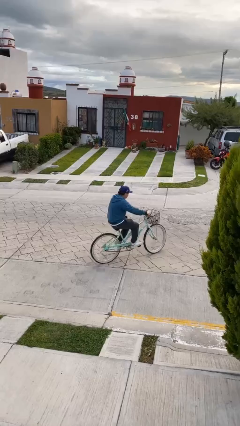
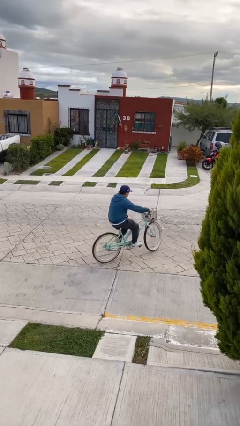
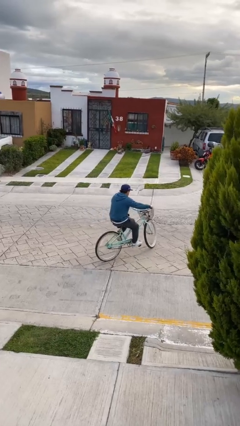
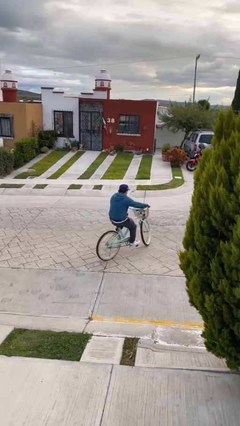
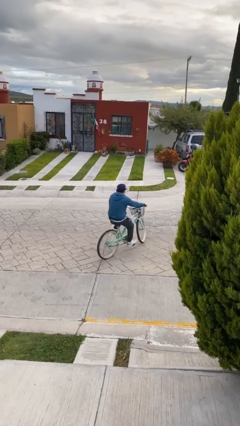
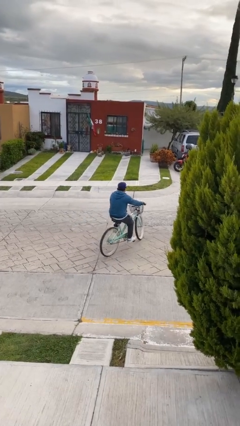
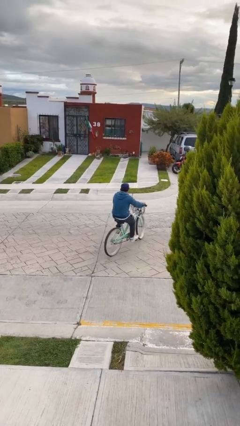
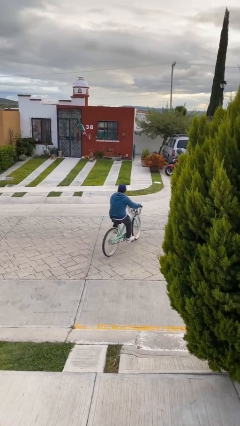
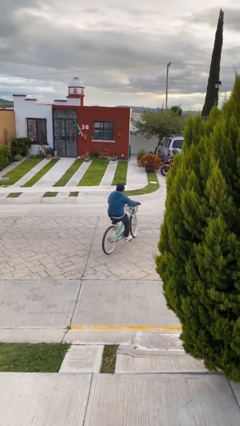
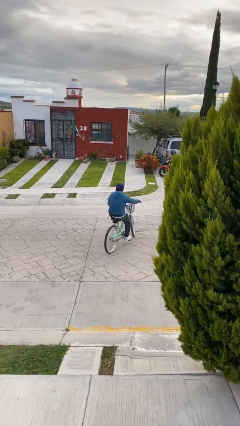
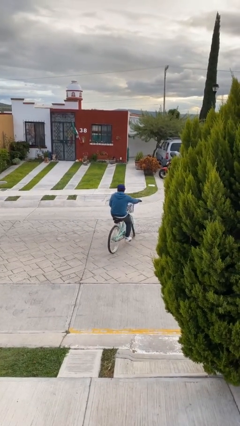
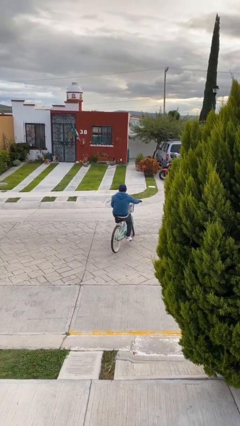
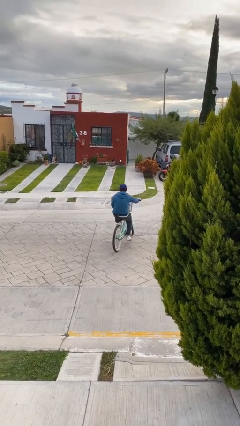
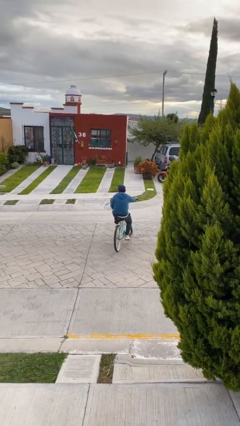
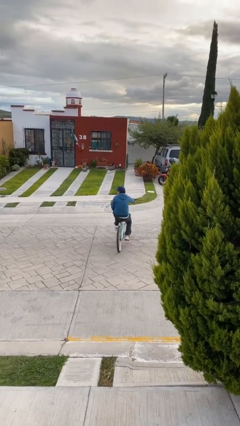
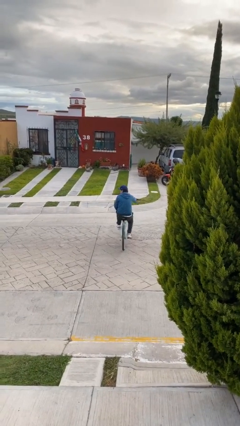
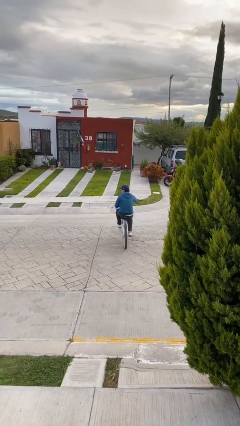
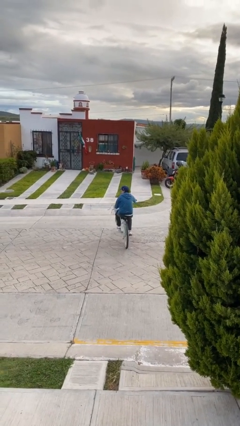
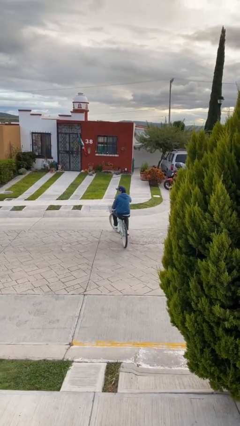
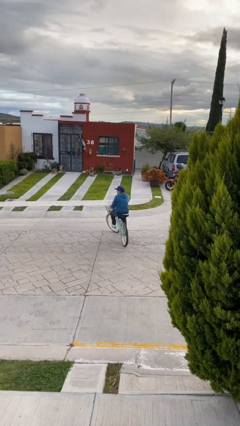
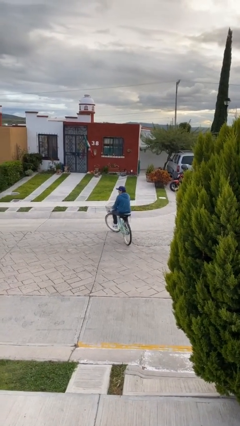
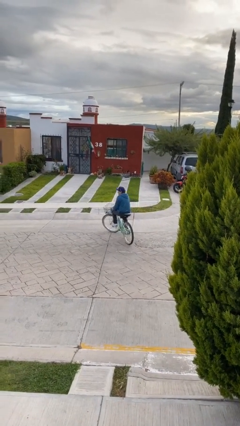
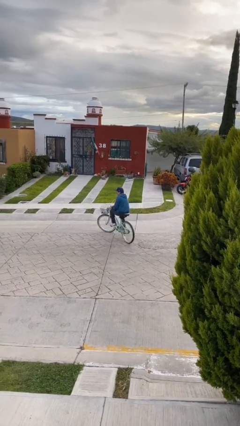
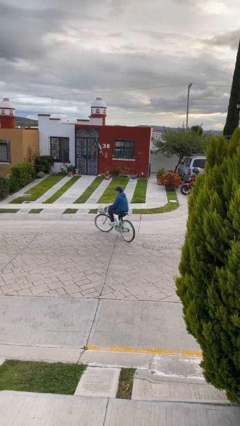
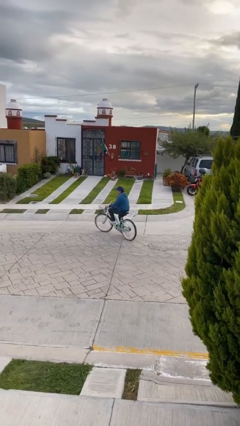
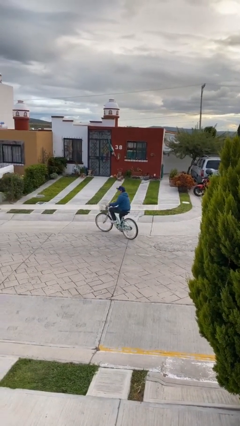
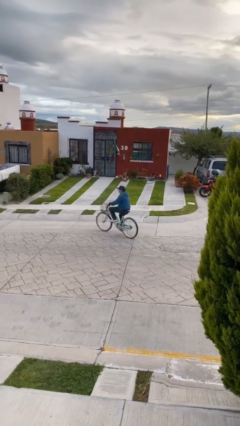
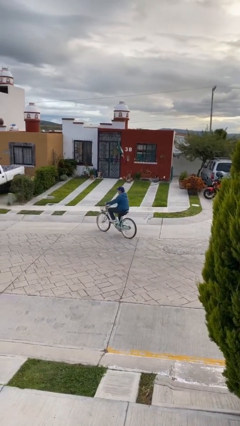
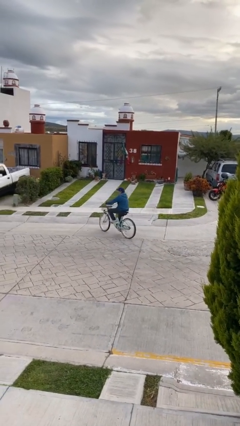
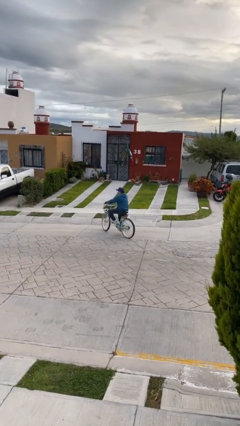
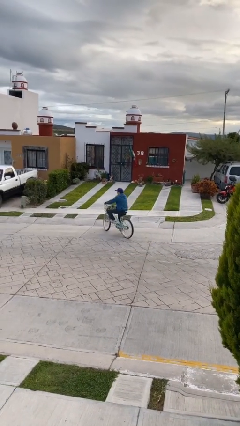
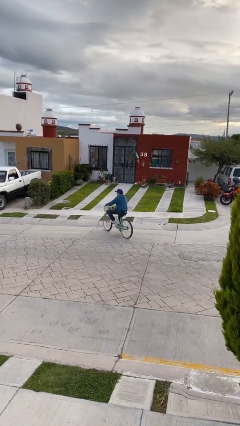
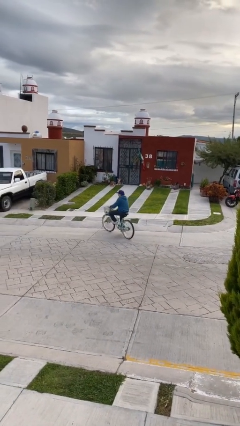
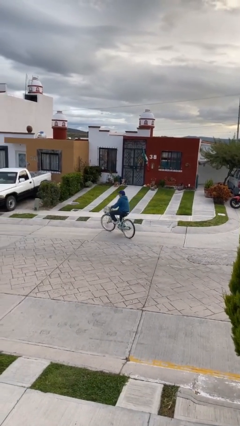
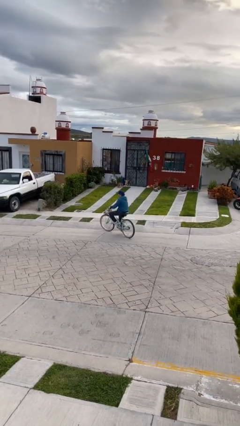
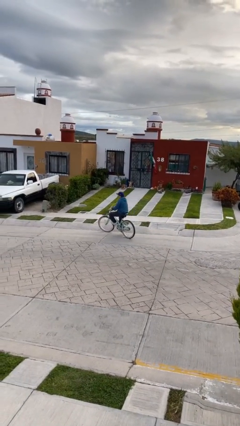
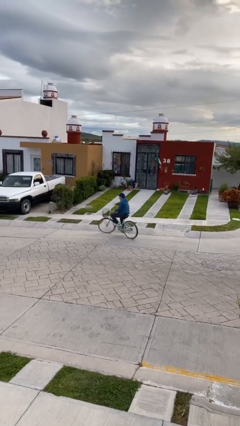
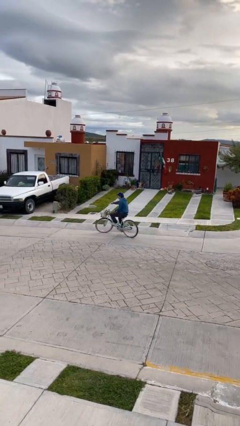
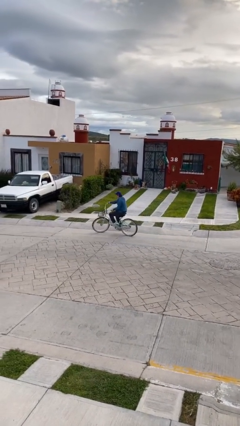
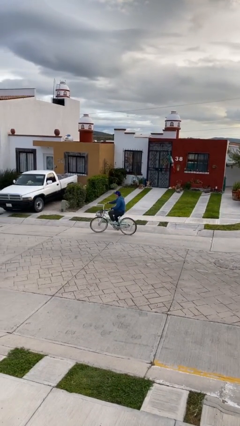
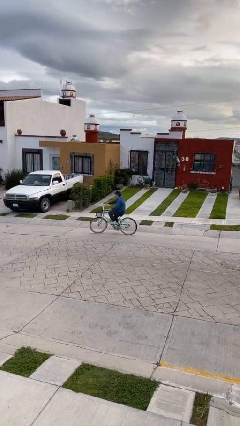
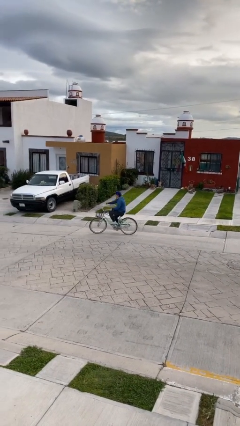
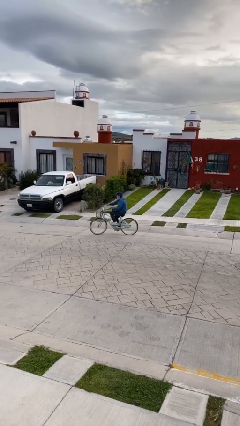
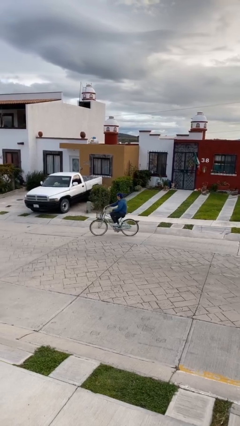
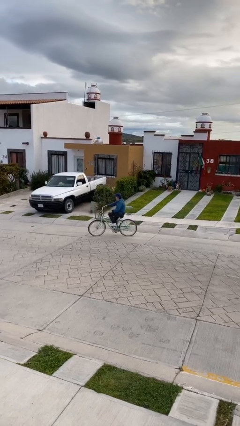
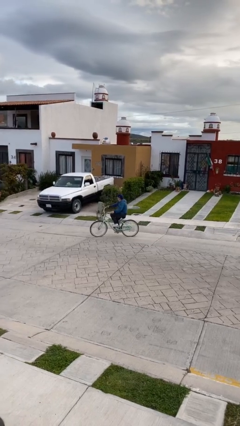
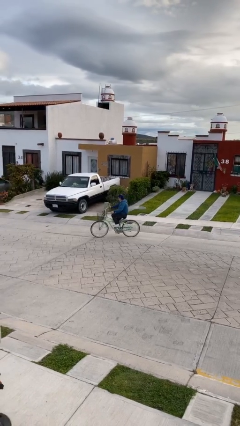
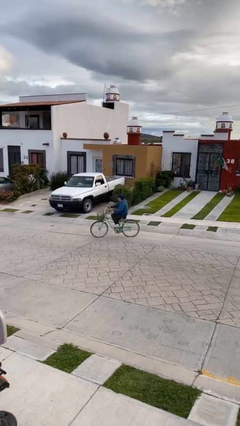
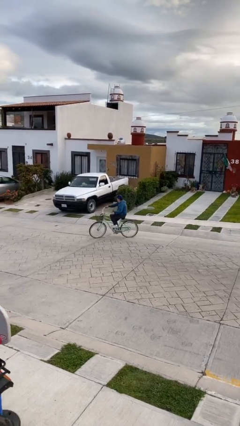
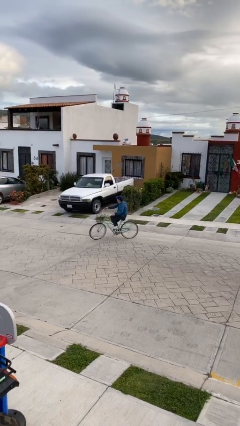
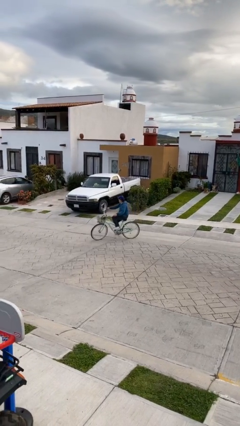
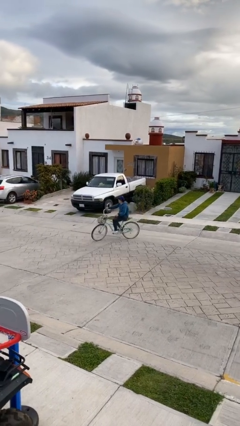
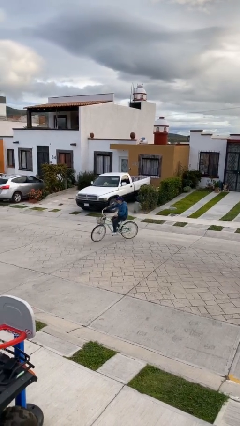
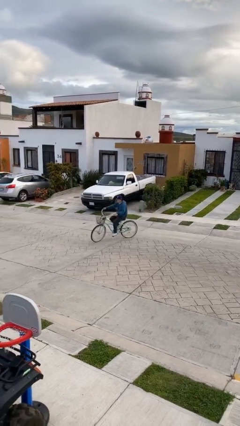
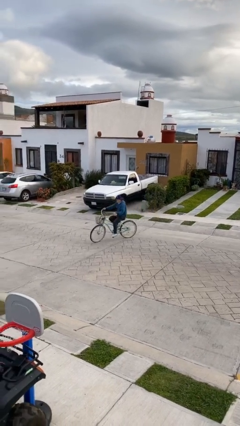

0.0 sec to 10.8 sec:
person rides bicycle

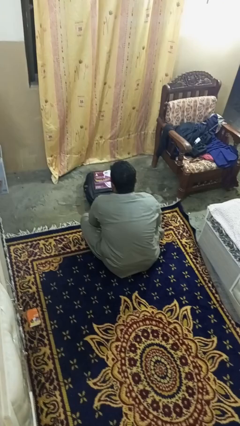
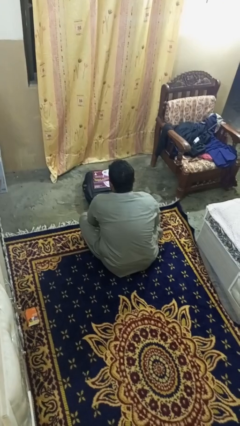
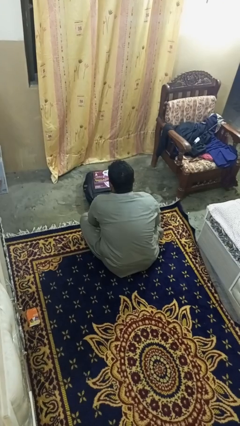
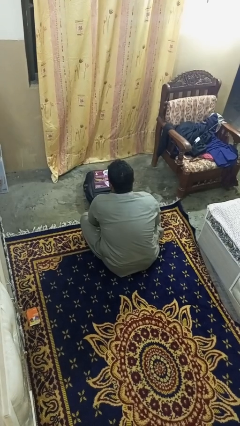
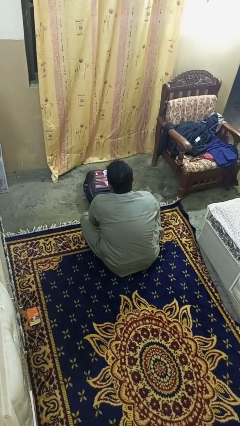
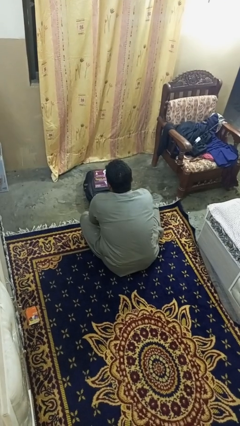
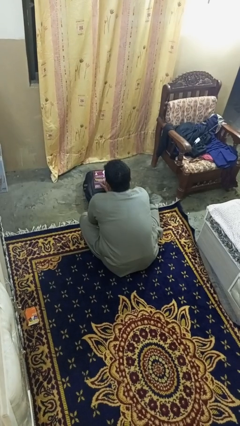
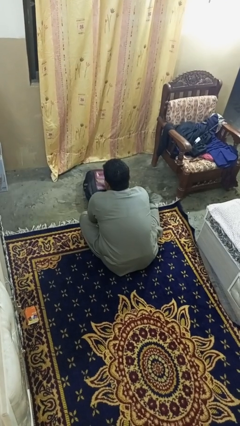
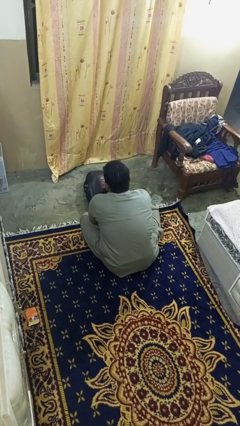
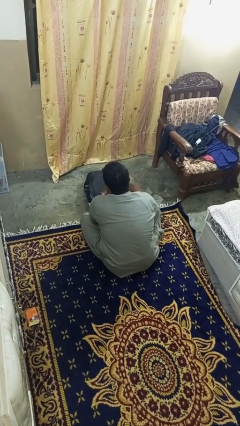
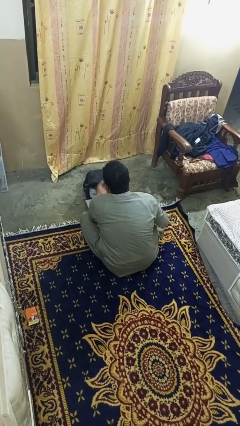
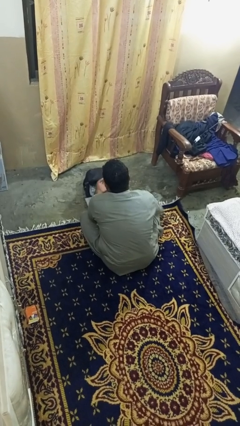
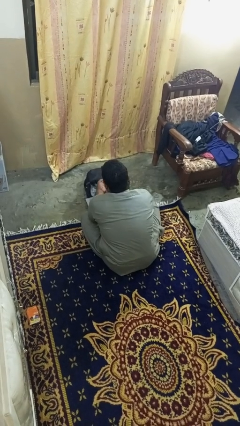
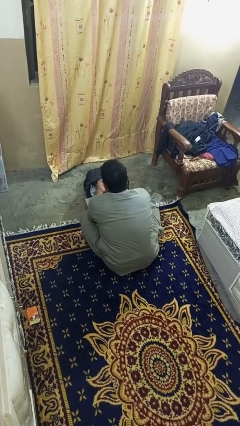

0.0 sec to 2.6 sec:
person puts object into bag

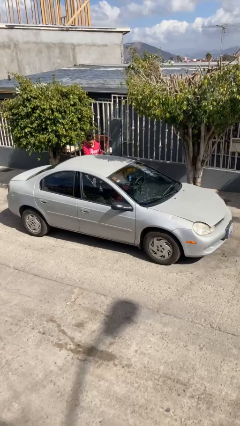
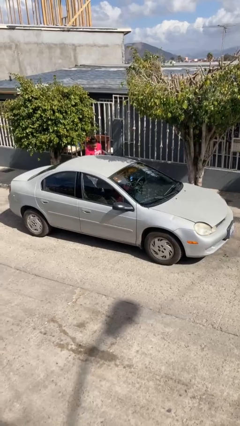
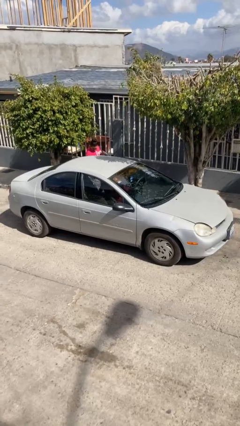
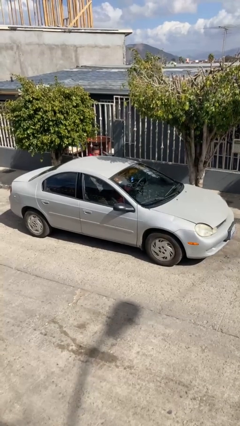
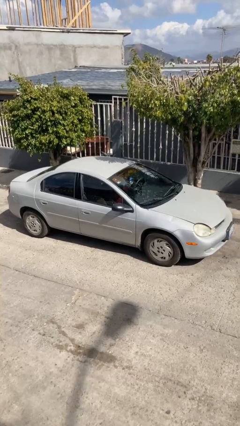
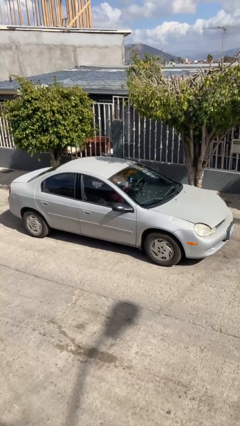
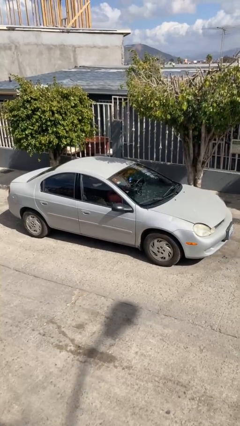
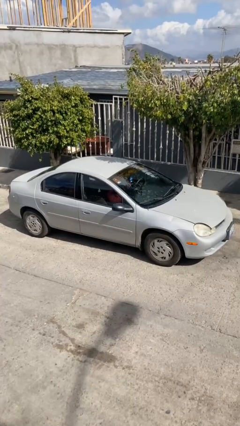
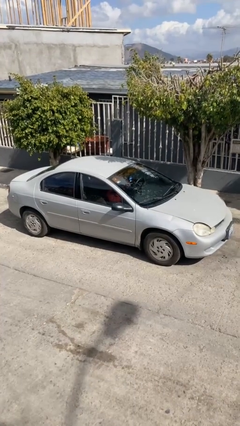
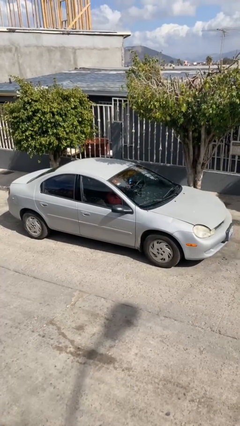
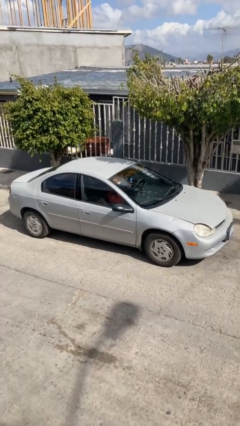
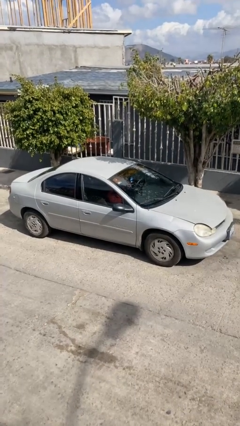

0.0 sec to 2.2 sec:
car picks up person

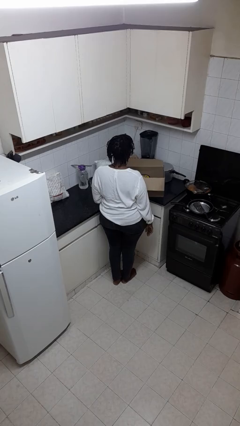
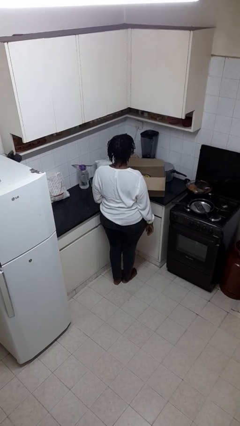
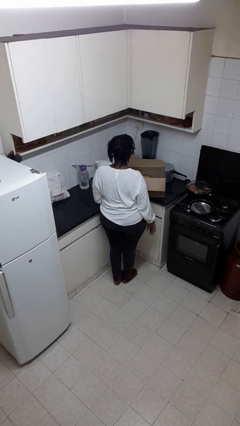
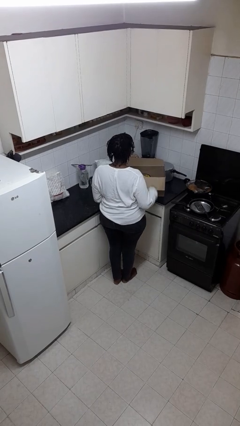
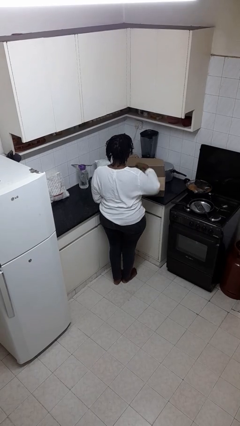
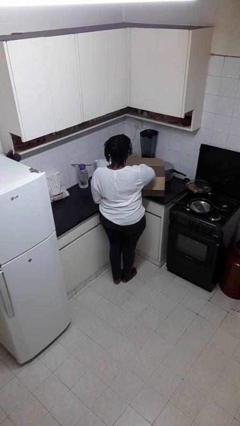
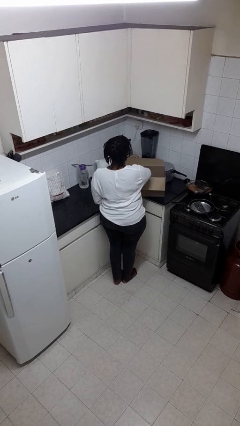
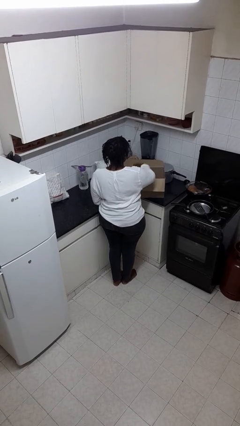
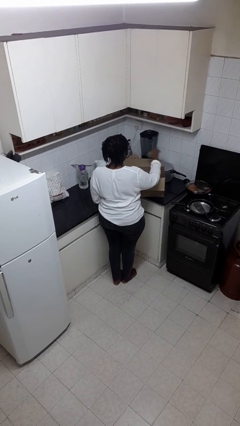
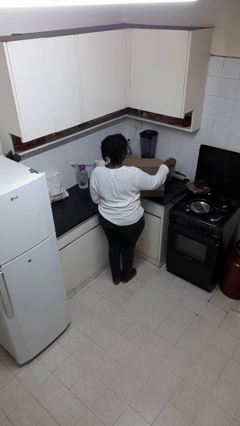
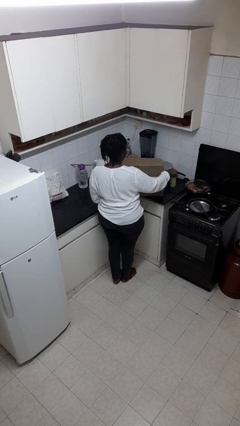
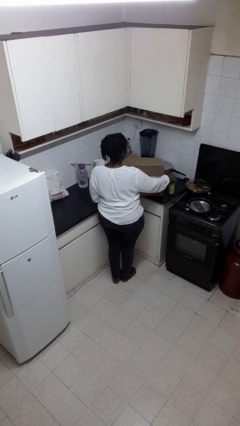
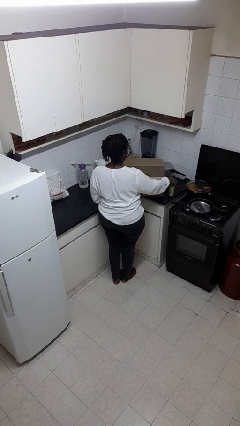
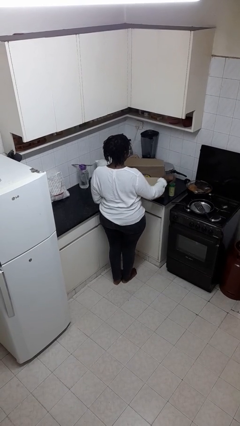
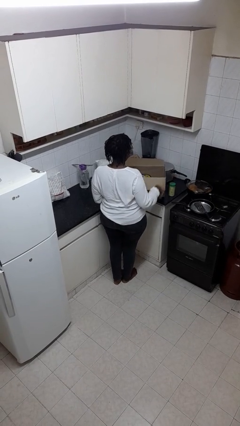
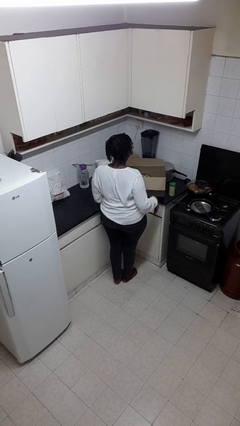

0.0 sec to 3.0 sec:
person takes object from box
